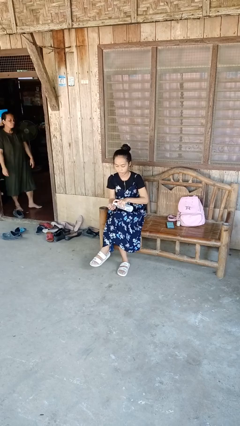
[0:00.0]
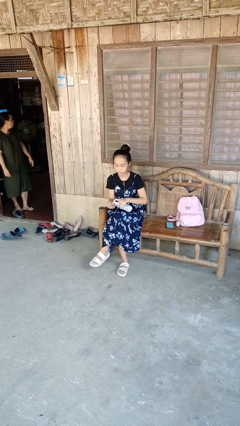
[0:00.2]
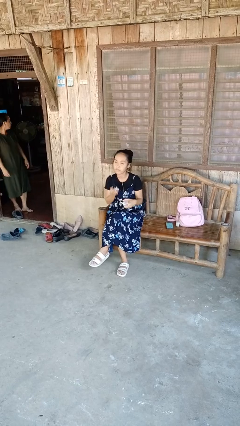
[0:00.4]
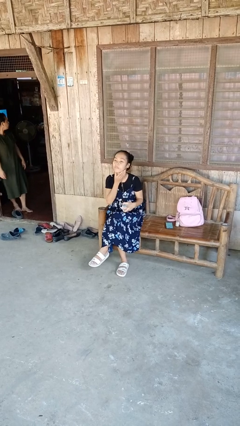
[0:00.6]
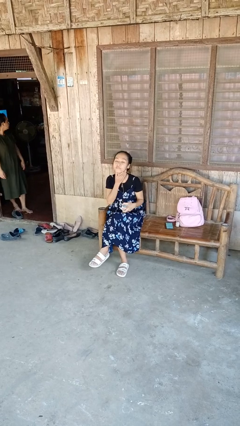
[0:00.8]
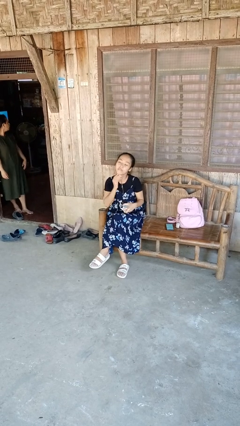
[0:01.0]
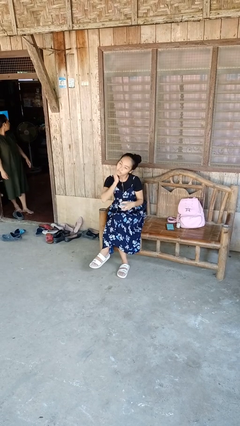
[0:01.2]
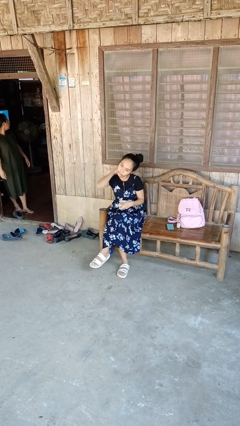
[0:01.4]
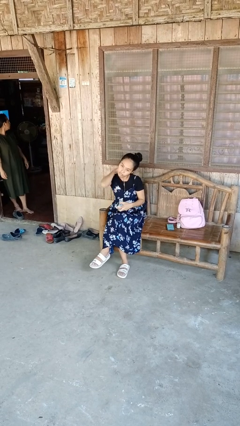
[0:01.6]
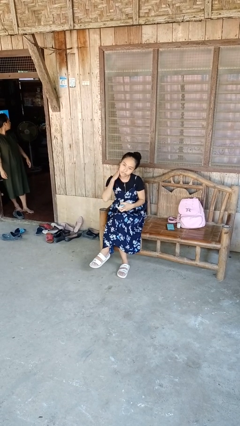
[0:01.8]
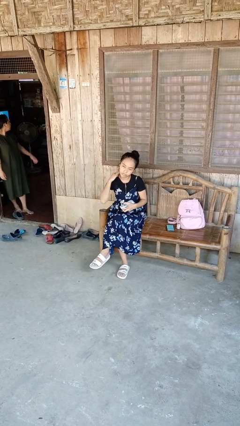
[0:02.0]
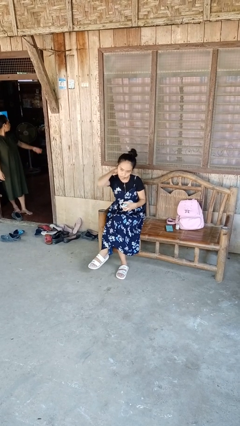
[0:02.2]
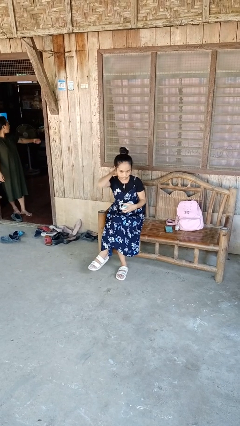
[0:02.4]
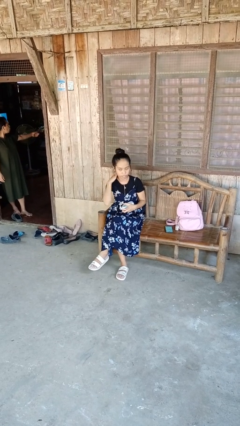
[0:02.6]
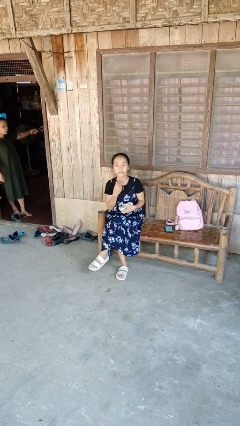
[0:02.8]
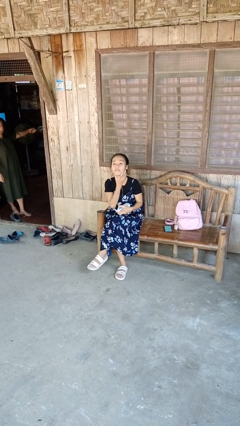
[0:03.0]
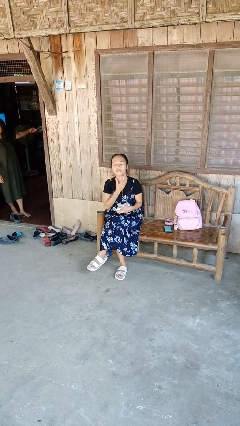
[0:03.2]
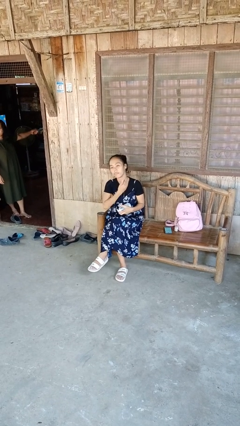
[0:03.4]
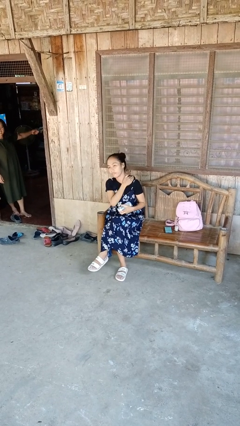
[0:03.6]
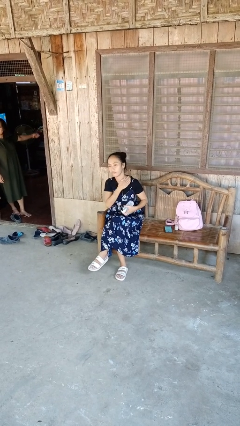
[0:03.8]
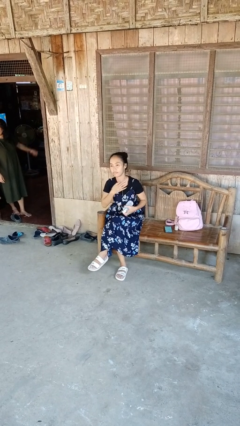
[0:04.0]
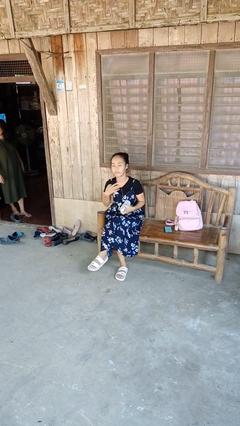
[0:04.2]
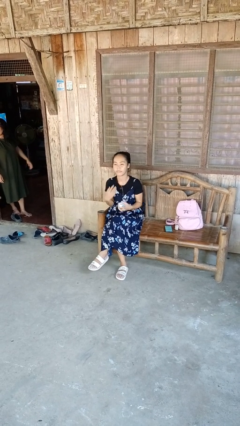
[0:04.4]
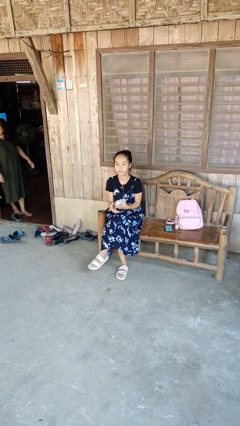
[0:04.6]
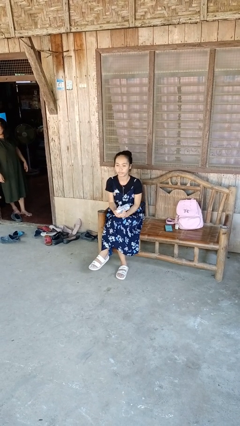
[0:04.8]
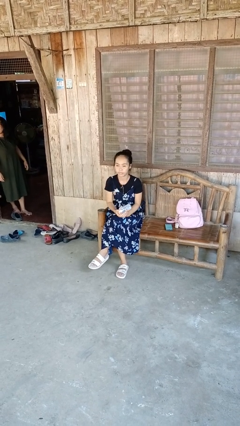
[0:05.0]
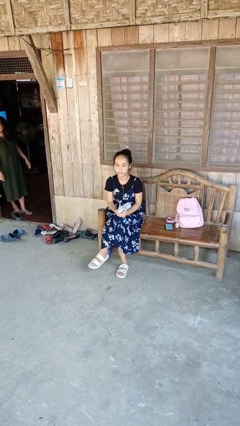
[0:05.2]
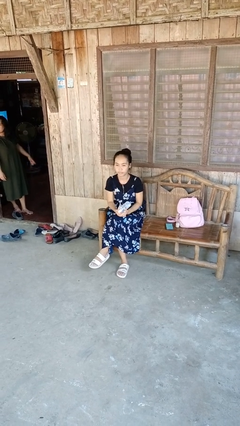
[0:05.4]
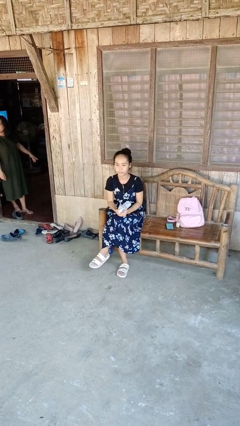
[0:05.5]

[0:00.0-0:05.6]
person applies sunscreen

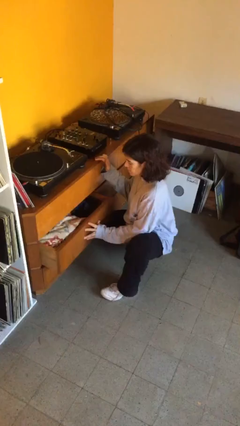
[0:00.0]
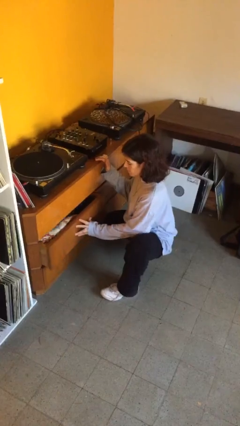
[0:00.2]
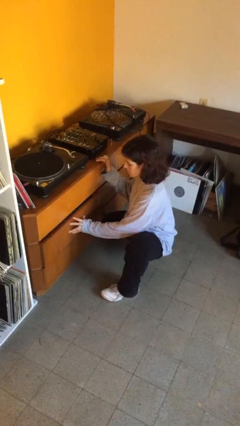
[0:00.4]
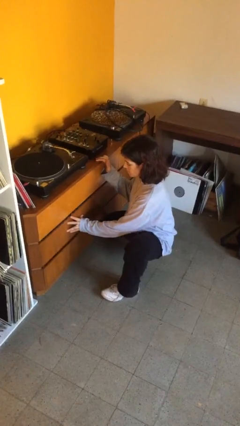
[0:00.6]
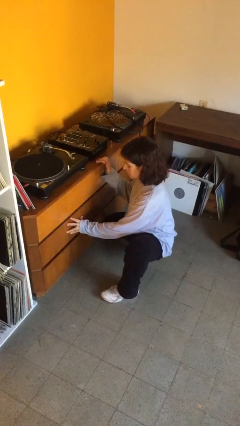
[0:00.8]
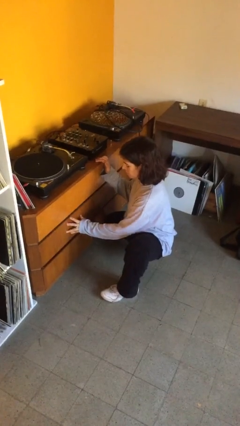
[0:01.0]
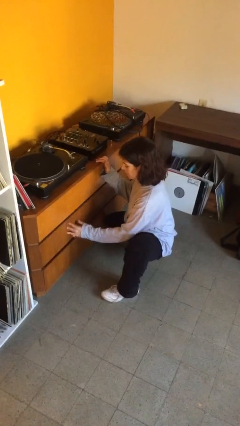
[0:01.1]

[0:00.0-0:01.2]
person closes dresser drawer

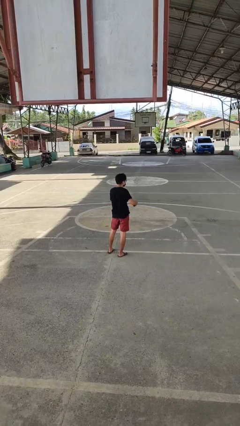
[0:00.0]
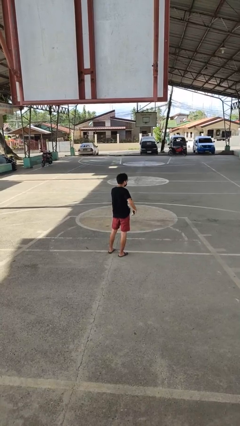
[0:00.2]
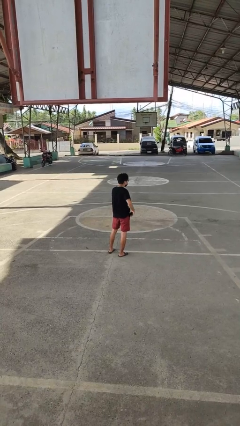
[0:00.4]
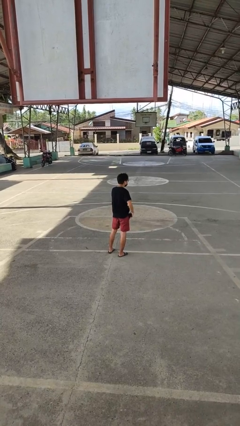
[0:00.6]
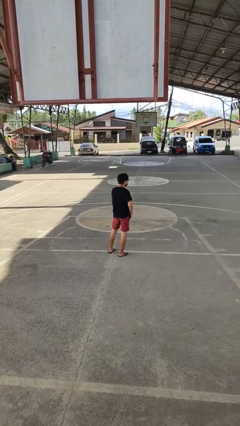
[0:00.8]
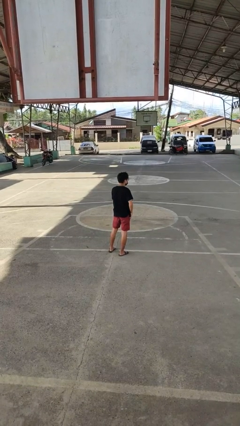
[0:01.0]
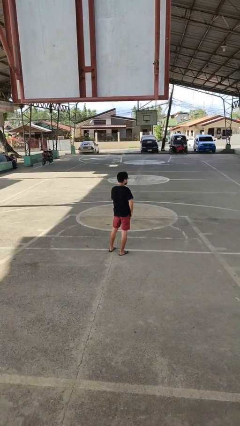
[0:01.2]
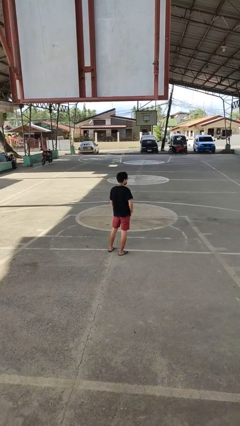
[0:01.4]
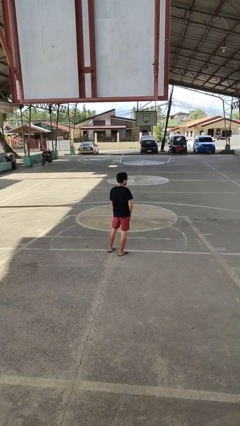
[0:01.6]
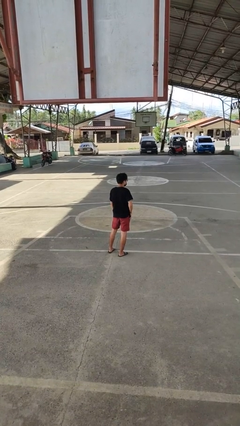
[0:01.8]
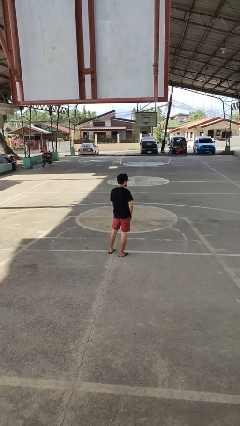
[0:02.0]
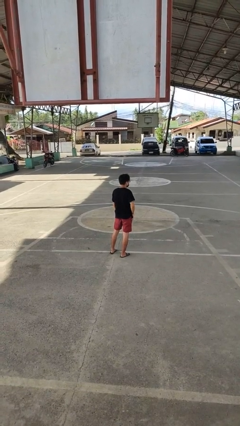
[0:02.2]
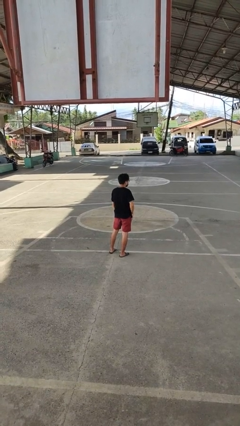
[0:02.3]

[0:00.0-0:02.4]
person puts phone into pocket

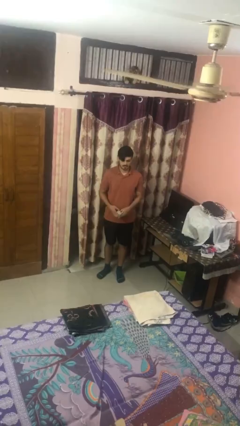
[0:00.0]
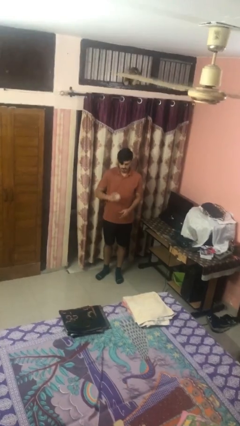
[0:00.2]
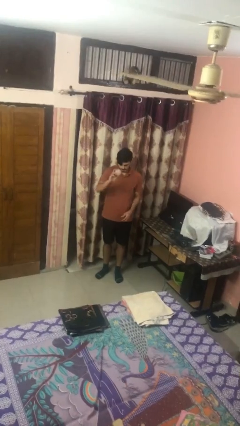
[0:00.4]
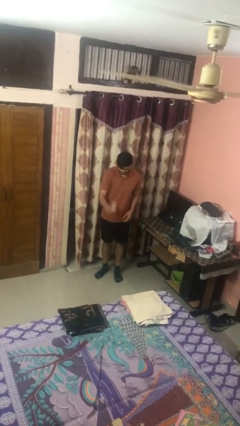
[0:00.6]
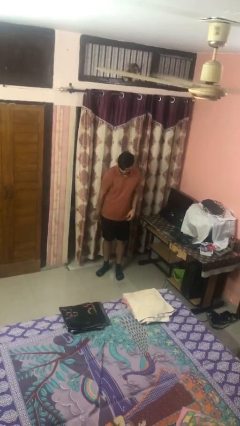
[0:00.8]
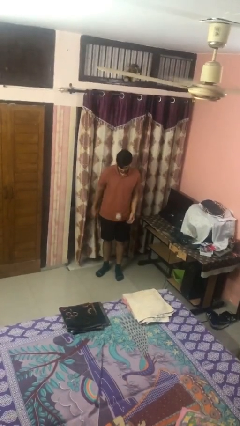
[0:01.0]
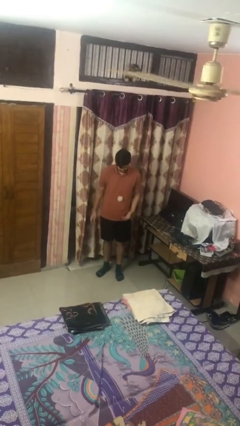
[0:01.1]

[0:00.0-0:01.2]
person bounces ball on floor

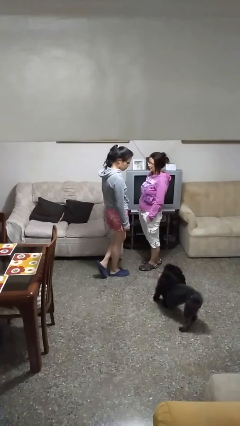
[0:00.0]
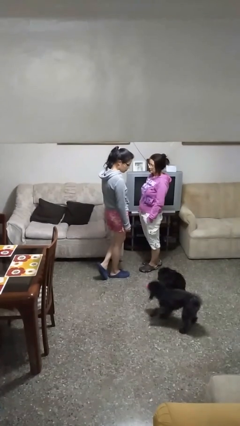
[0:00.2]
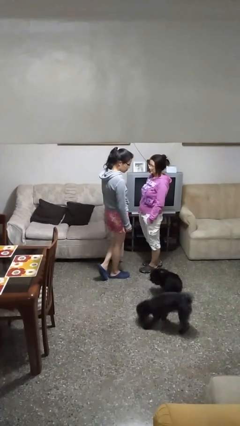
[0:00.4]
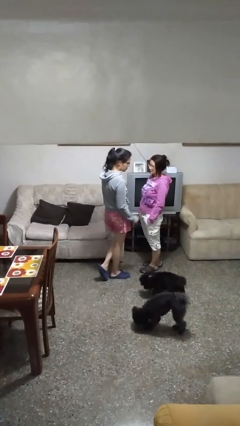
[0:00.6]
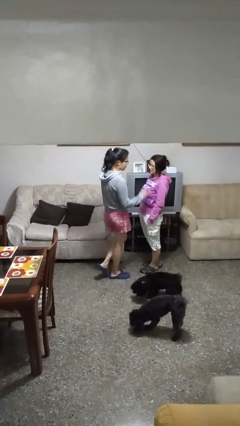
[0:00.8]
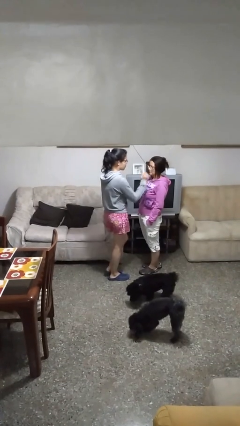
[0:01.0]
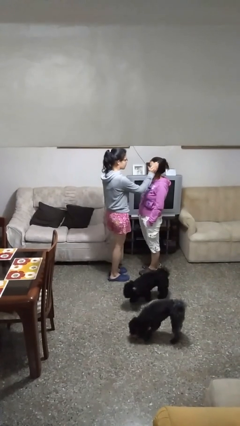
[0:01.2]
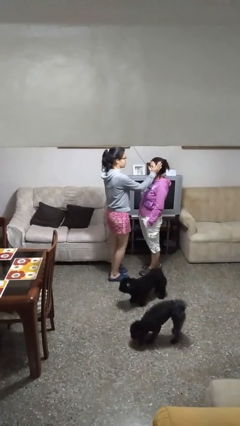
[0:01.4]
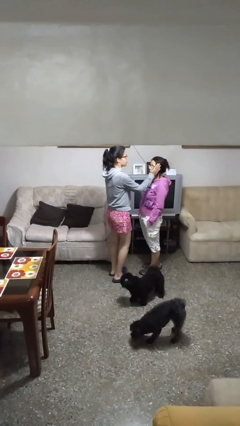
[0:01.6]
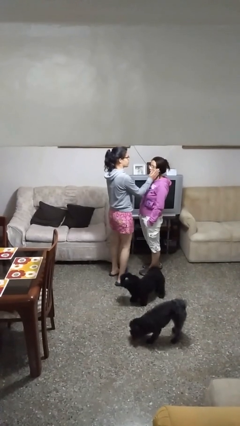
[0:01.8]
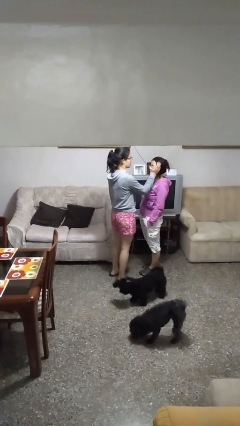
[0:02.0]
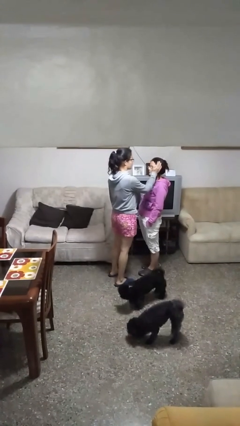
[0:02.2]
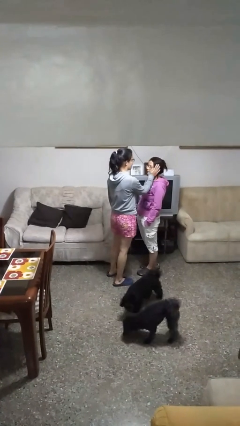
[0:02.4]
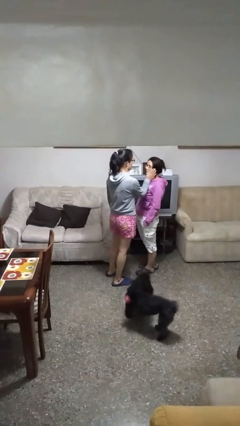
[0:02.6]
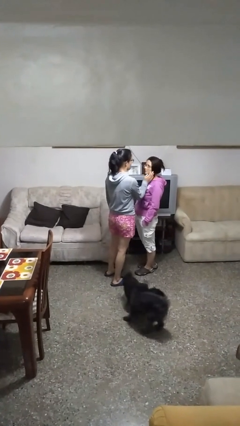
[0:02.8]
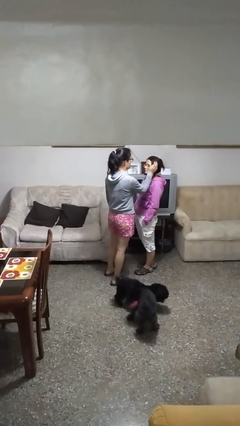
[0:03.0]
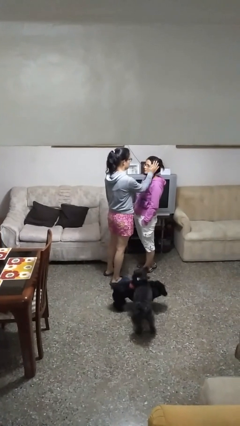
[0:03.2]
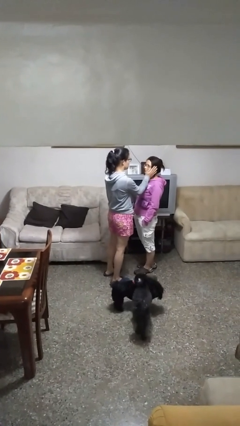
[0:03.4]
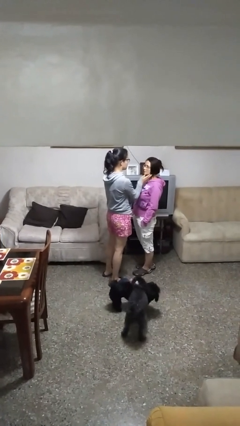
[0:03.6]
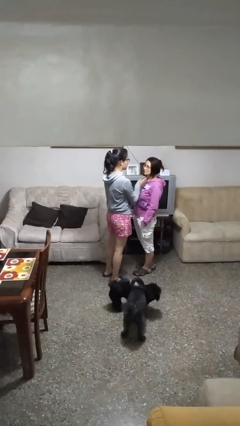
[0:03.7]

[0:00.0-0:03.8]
person touches face of person

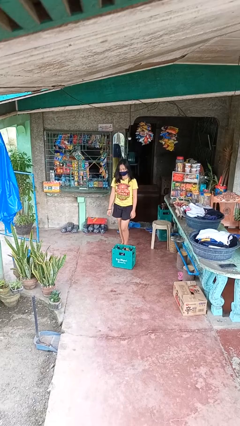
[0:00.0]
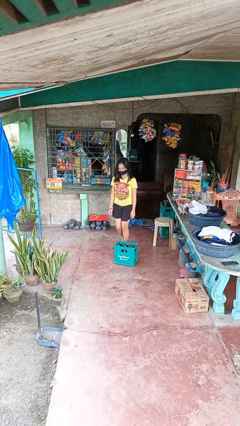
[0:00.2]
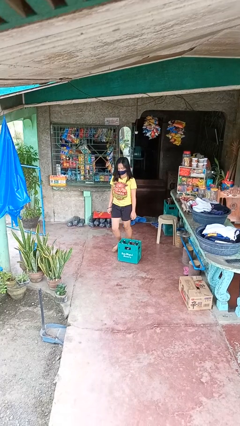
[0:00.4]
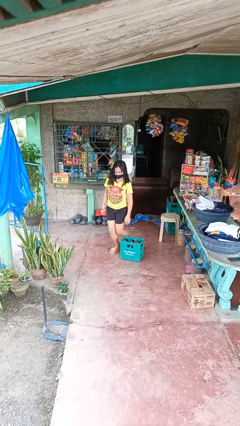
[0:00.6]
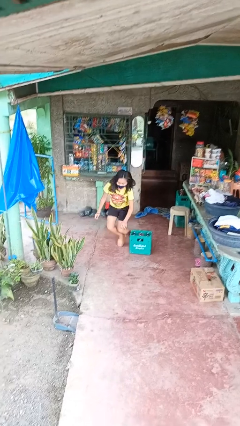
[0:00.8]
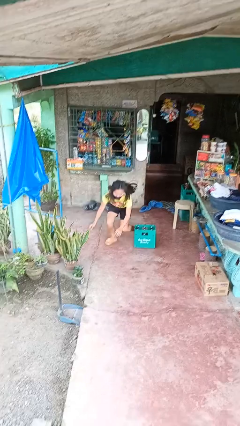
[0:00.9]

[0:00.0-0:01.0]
person trips on object on floor

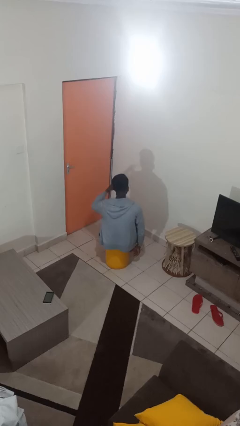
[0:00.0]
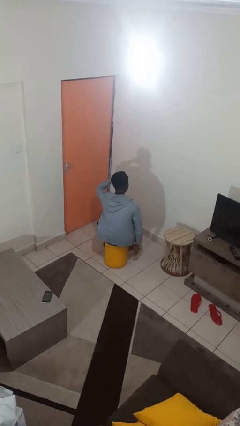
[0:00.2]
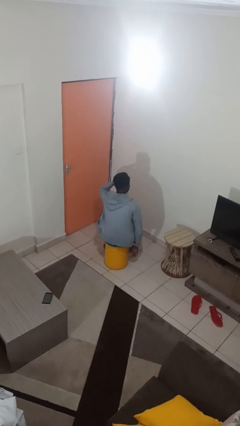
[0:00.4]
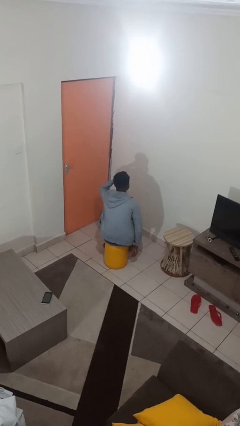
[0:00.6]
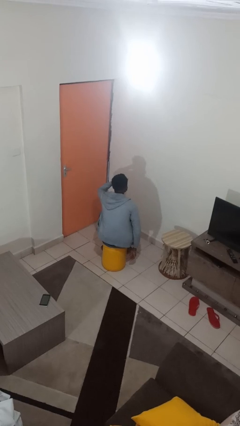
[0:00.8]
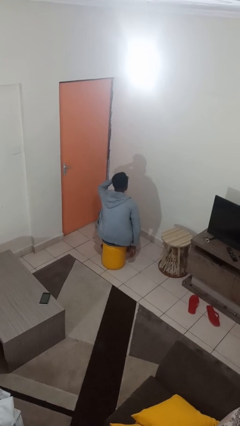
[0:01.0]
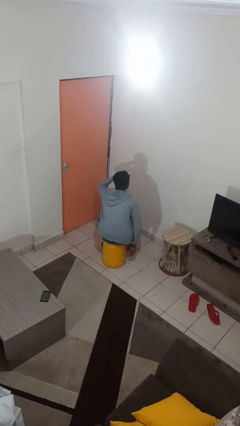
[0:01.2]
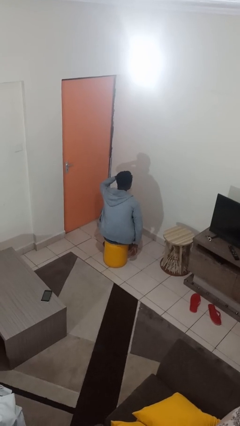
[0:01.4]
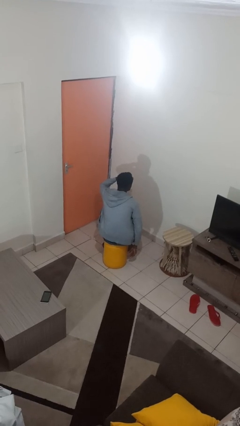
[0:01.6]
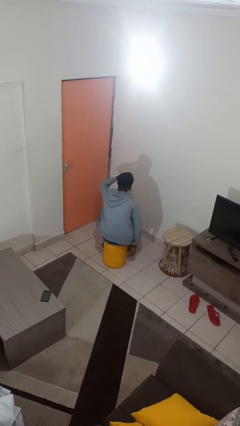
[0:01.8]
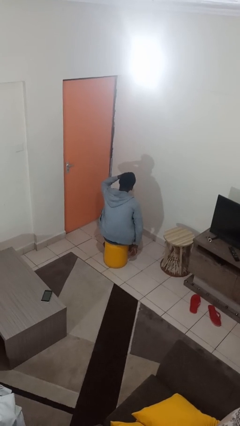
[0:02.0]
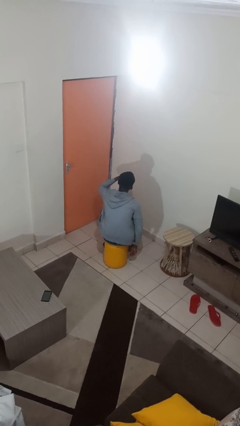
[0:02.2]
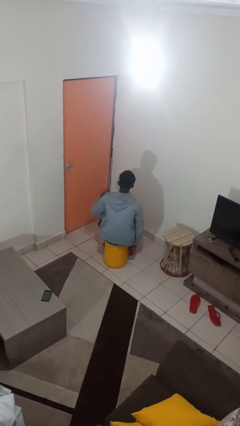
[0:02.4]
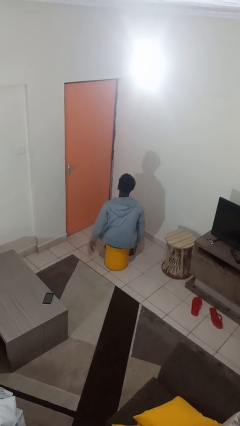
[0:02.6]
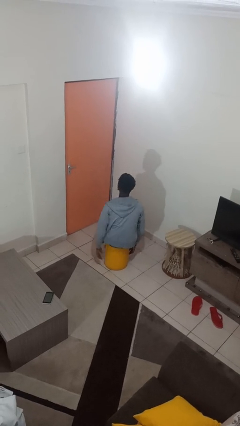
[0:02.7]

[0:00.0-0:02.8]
person shades eyes
